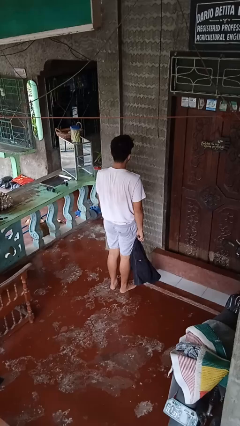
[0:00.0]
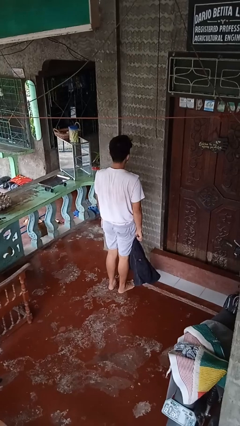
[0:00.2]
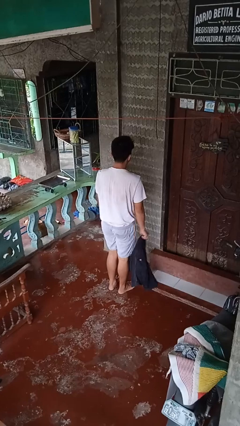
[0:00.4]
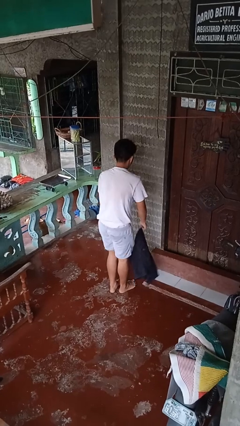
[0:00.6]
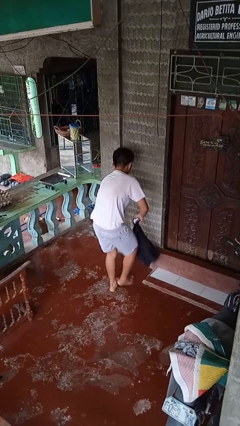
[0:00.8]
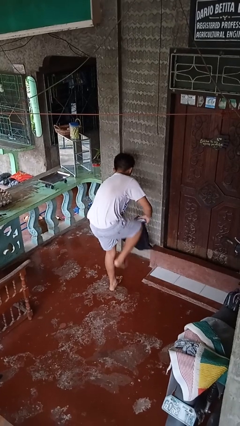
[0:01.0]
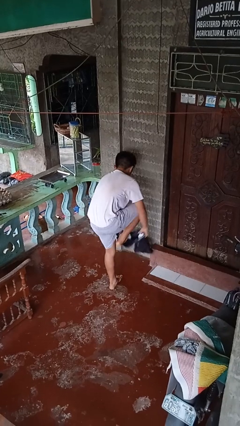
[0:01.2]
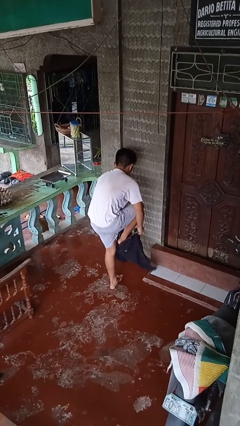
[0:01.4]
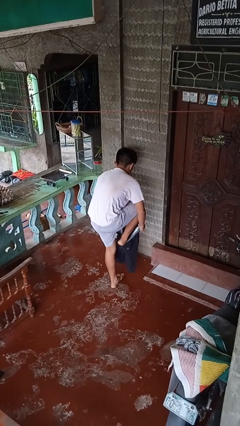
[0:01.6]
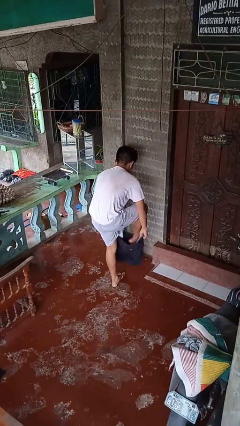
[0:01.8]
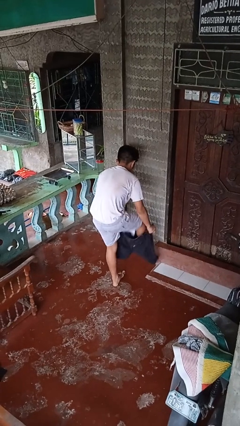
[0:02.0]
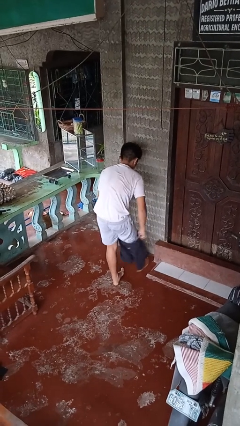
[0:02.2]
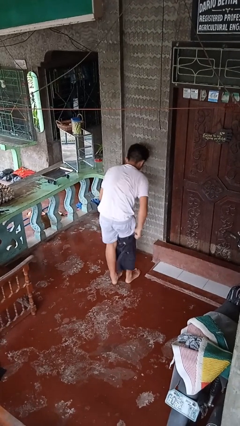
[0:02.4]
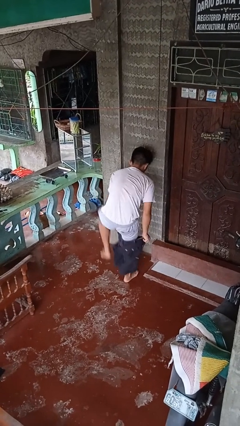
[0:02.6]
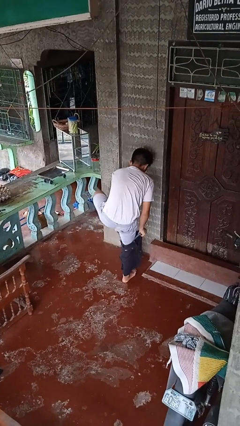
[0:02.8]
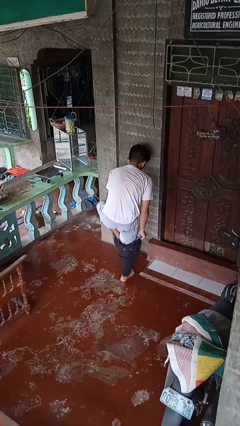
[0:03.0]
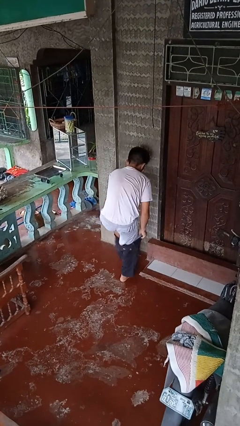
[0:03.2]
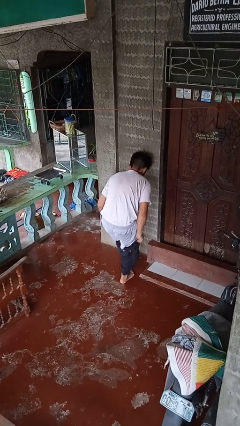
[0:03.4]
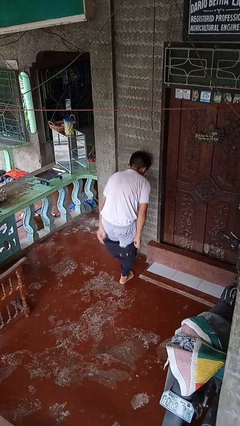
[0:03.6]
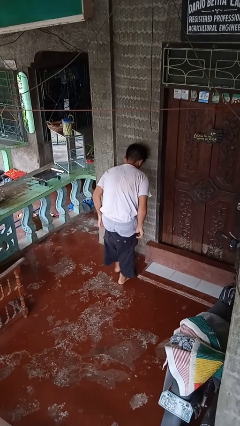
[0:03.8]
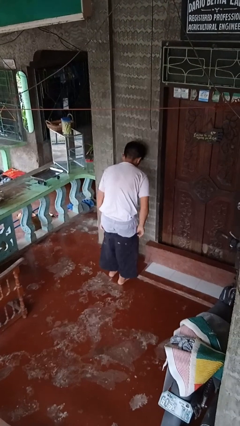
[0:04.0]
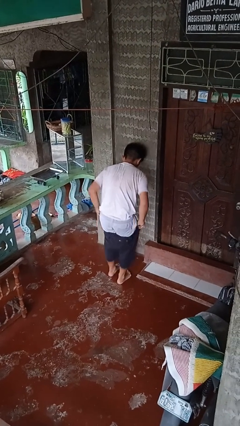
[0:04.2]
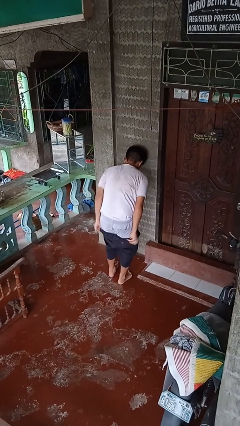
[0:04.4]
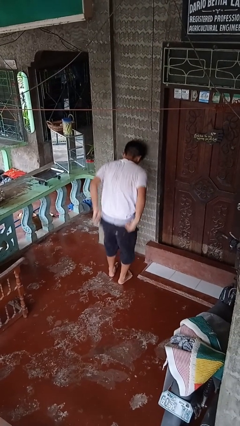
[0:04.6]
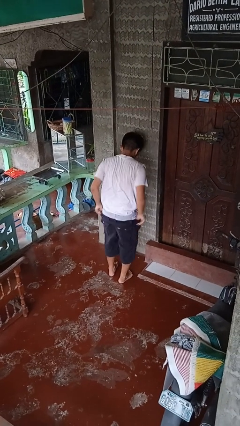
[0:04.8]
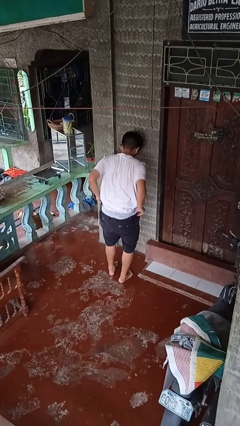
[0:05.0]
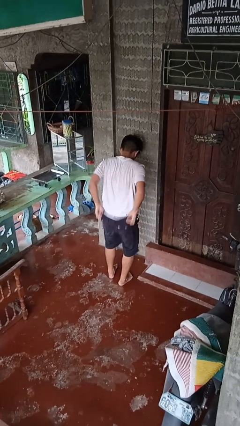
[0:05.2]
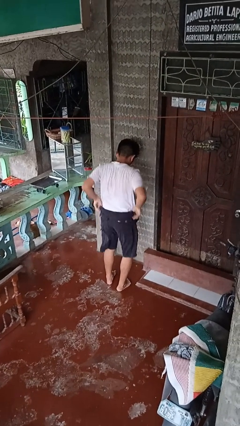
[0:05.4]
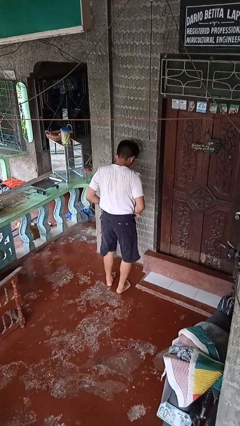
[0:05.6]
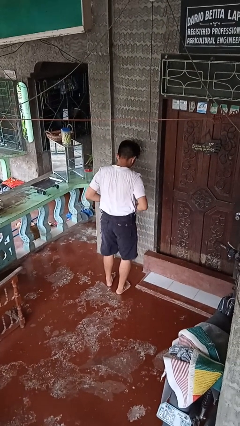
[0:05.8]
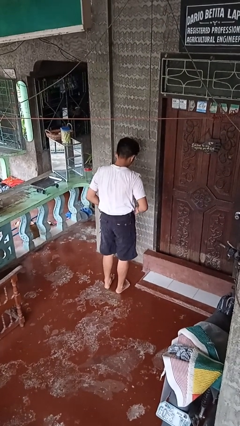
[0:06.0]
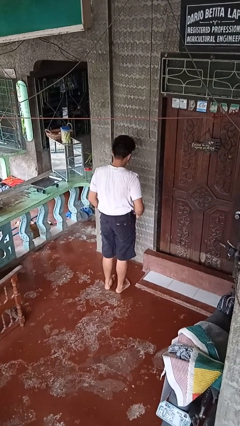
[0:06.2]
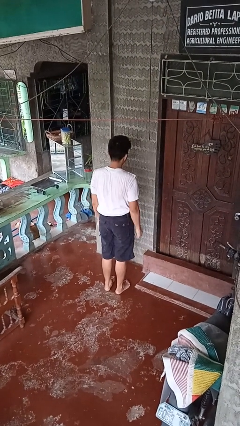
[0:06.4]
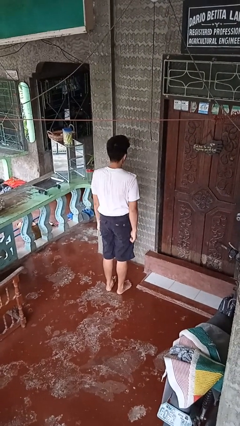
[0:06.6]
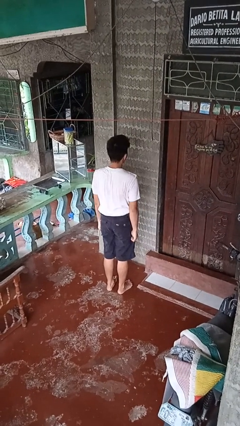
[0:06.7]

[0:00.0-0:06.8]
person puts on pants

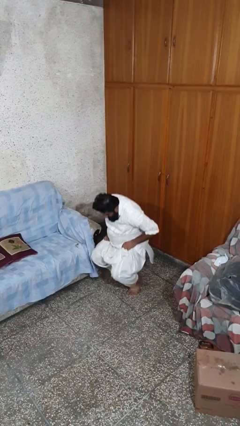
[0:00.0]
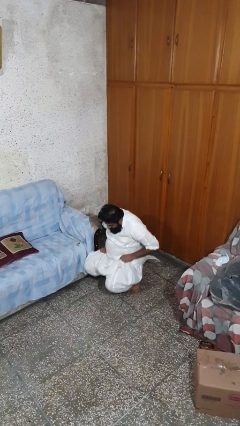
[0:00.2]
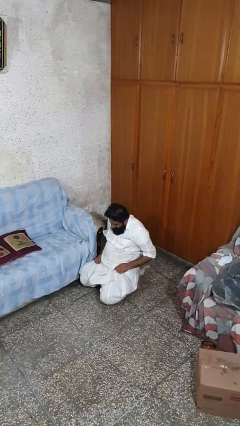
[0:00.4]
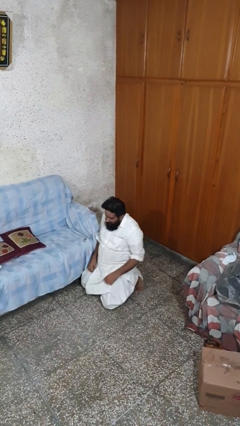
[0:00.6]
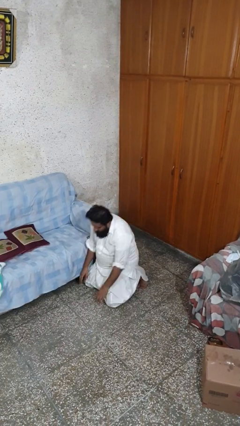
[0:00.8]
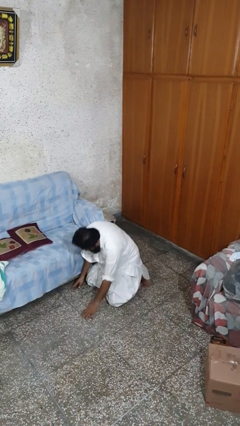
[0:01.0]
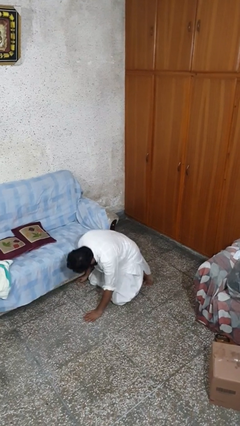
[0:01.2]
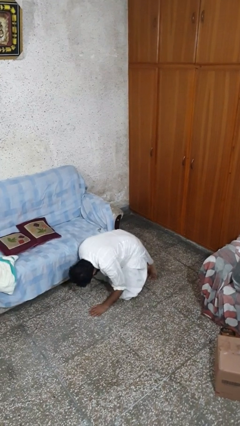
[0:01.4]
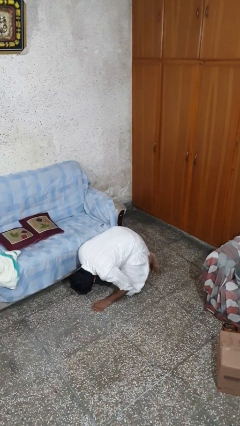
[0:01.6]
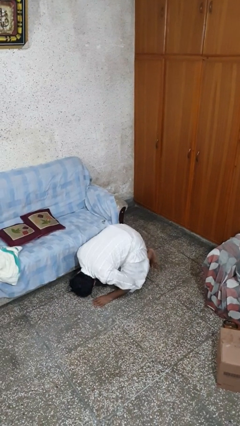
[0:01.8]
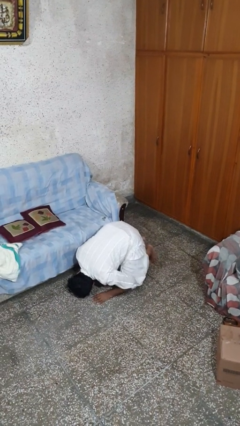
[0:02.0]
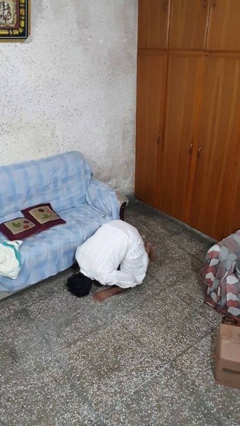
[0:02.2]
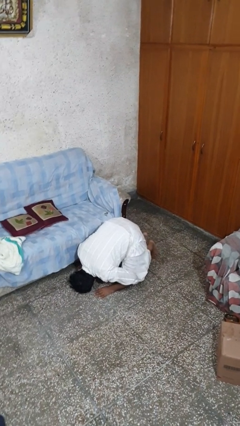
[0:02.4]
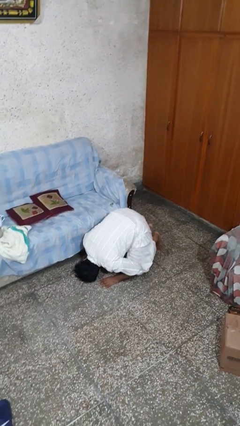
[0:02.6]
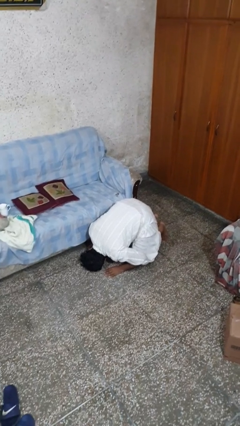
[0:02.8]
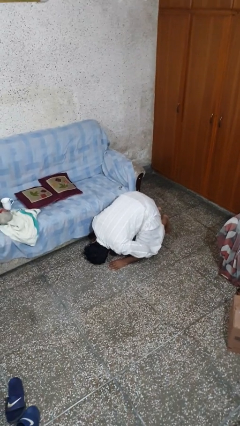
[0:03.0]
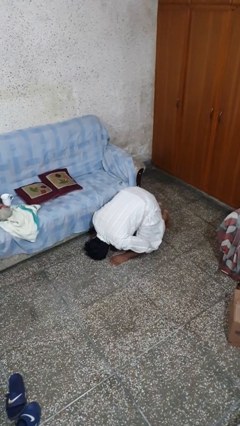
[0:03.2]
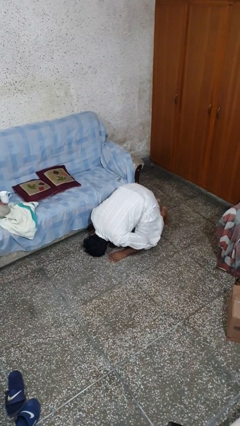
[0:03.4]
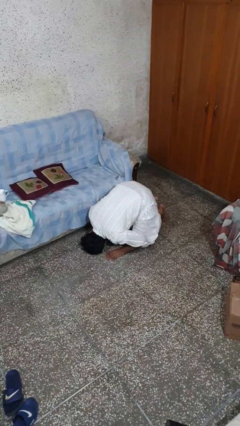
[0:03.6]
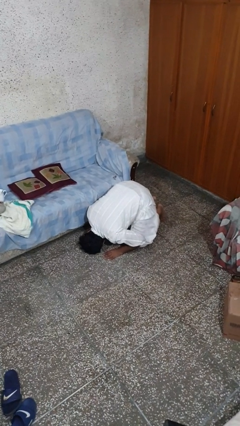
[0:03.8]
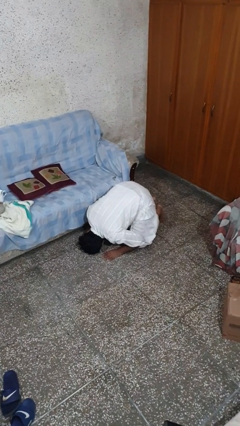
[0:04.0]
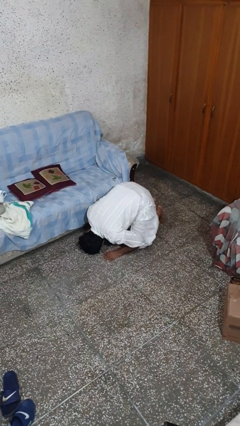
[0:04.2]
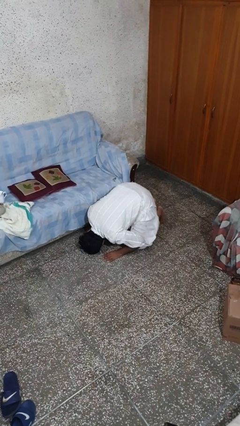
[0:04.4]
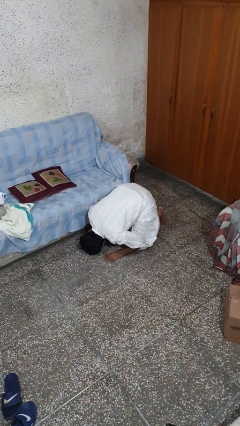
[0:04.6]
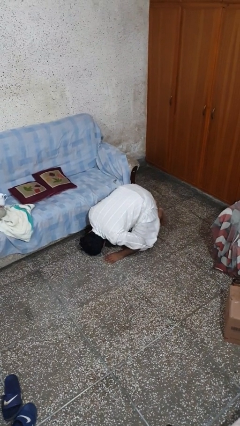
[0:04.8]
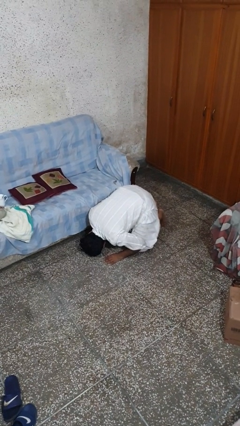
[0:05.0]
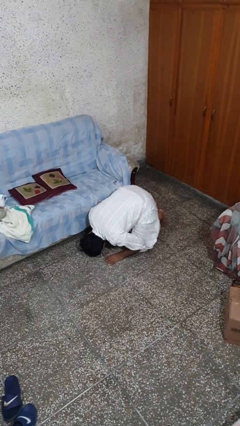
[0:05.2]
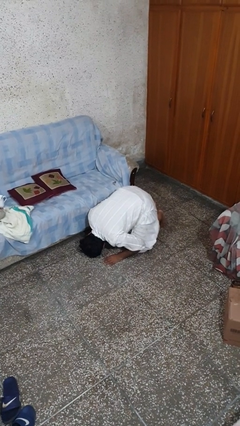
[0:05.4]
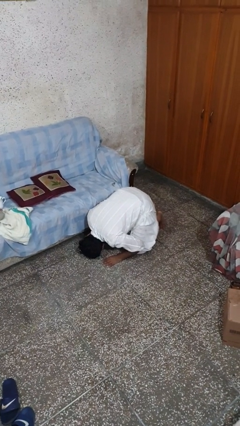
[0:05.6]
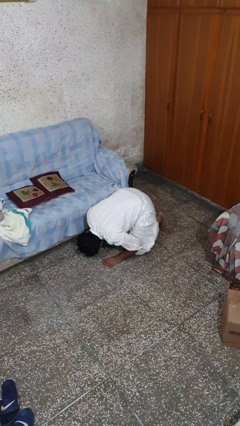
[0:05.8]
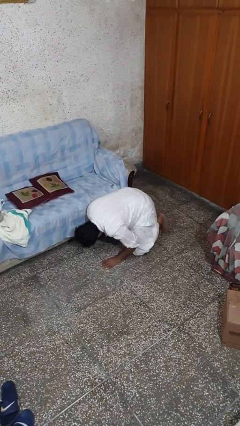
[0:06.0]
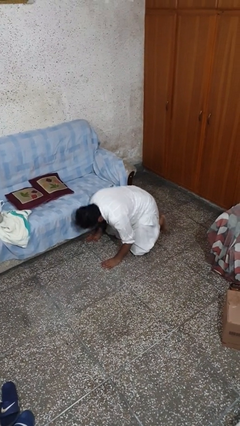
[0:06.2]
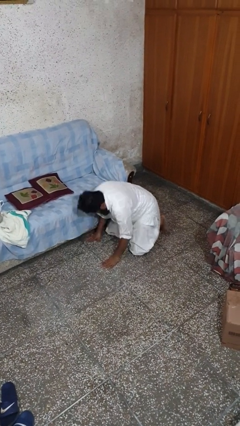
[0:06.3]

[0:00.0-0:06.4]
person searches under couch

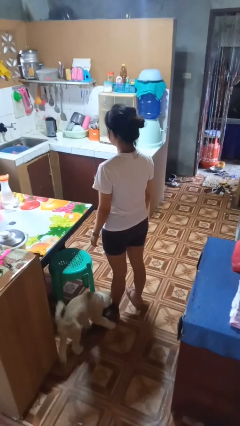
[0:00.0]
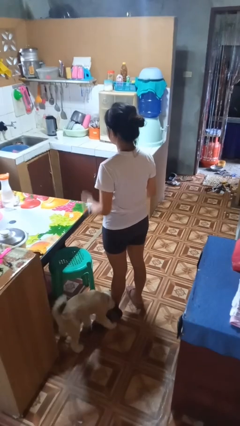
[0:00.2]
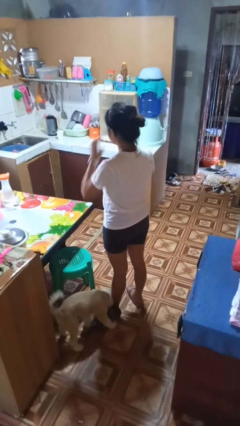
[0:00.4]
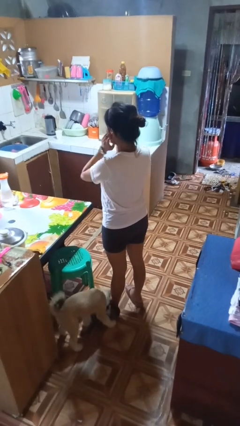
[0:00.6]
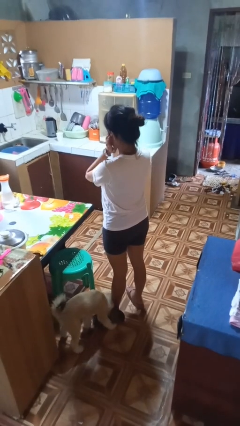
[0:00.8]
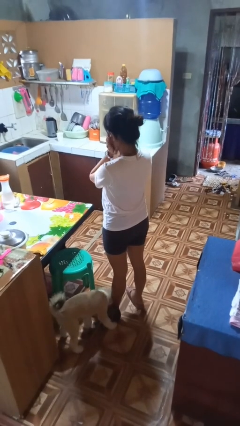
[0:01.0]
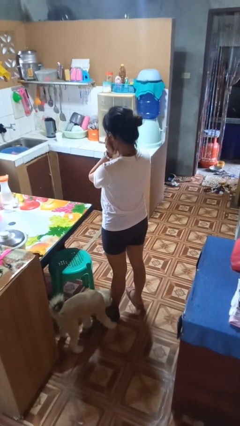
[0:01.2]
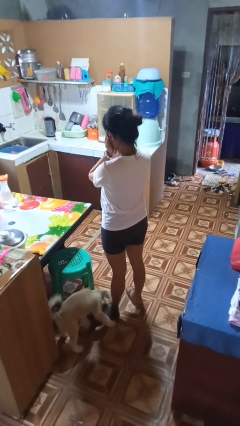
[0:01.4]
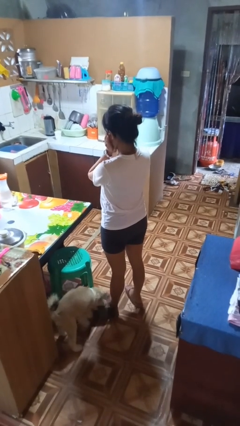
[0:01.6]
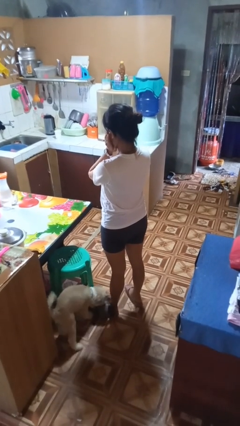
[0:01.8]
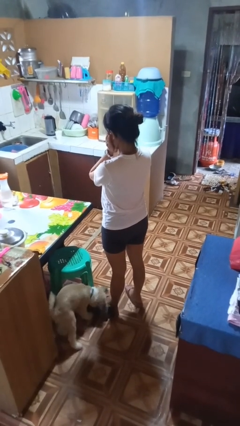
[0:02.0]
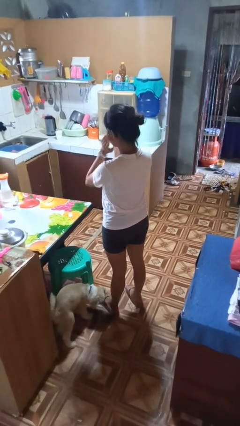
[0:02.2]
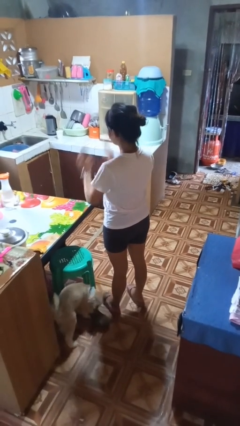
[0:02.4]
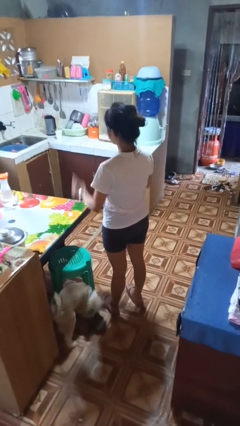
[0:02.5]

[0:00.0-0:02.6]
person puts fingers in ear

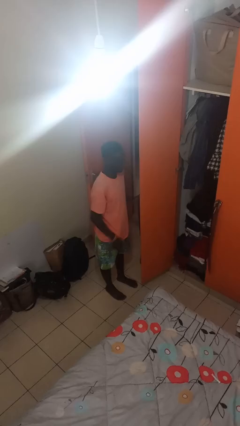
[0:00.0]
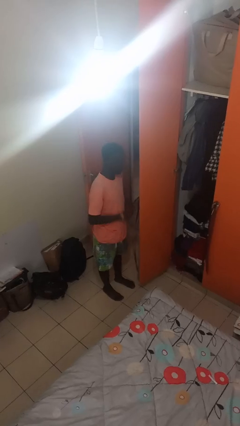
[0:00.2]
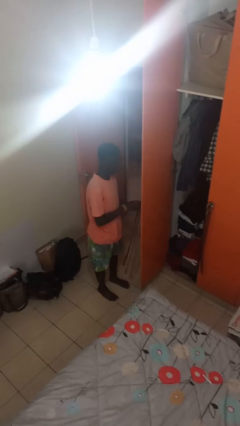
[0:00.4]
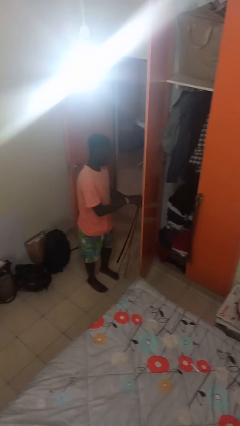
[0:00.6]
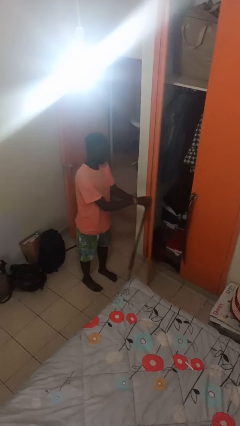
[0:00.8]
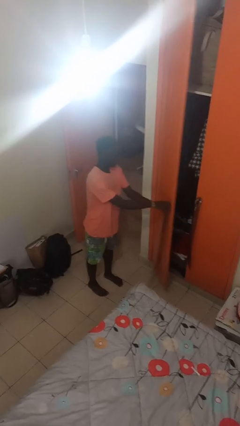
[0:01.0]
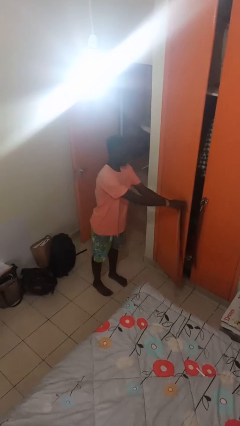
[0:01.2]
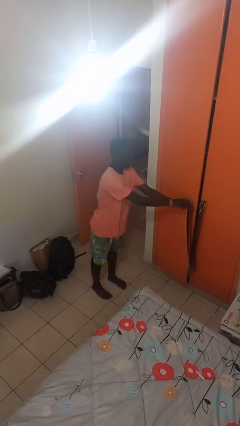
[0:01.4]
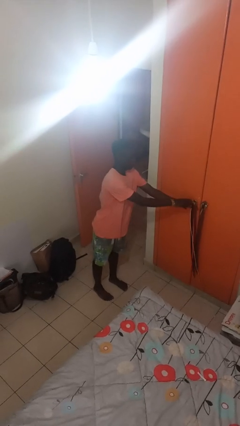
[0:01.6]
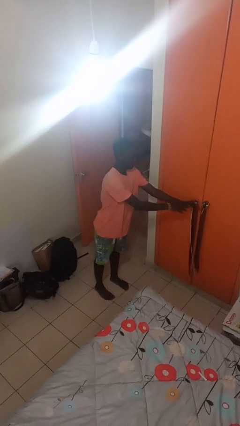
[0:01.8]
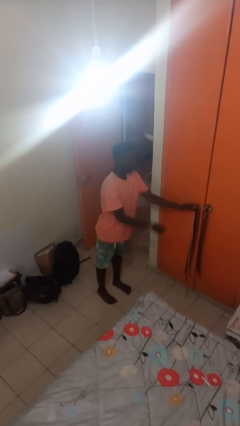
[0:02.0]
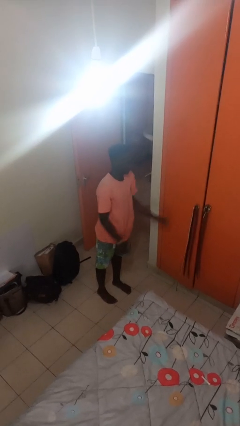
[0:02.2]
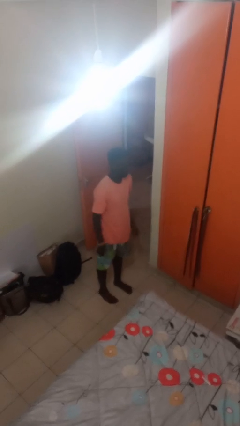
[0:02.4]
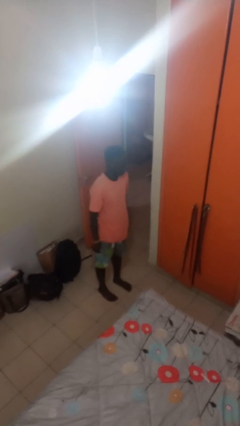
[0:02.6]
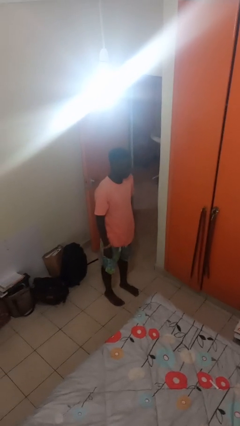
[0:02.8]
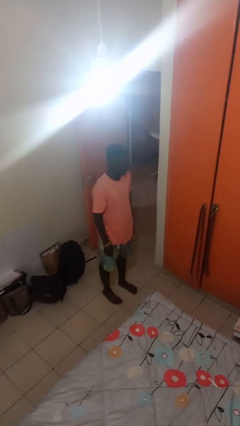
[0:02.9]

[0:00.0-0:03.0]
person closes closet door
